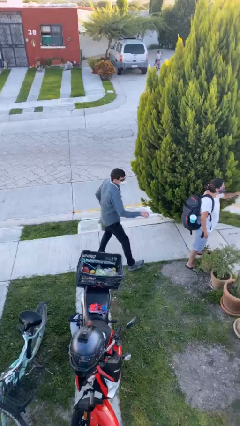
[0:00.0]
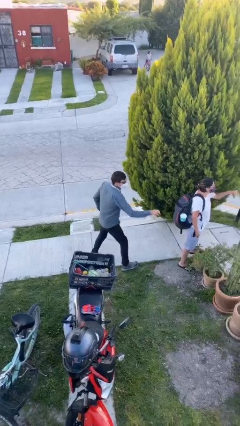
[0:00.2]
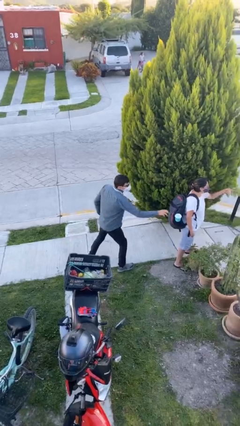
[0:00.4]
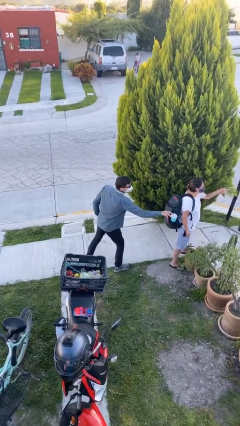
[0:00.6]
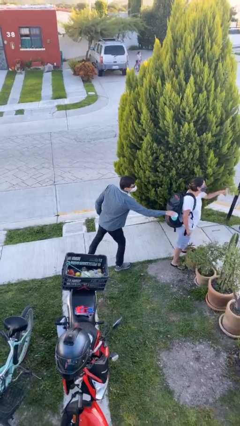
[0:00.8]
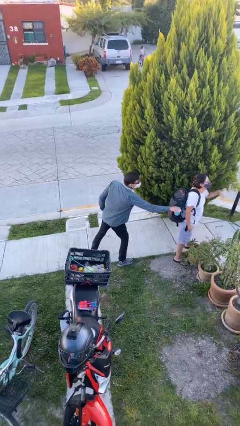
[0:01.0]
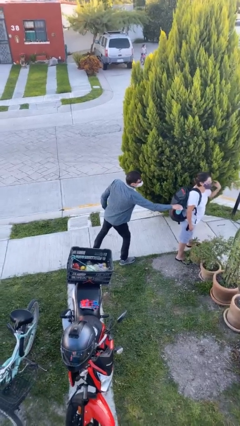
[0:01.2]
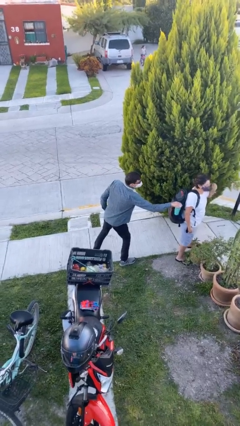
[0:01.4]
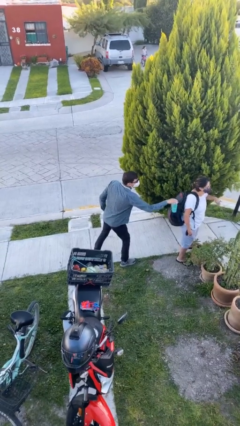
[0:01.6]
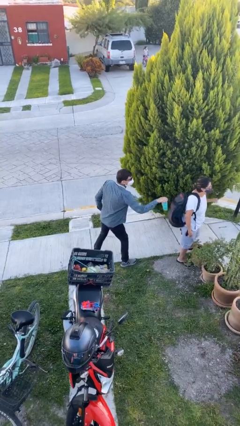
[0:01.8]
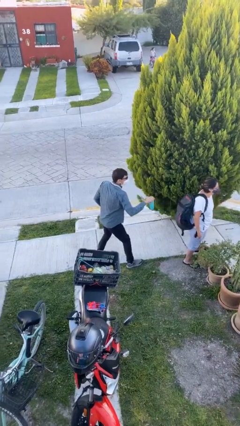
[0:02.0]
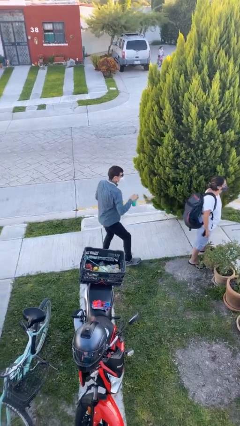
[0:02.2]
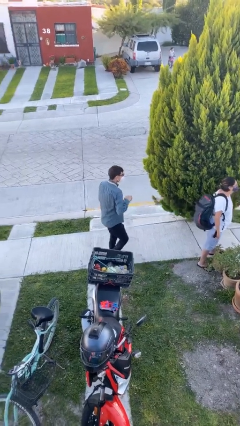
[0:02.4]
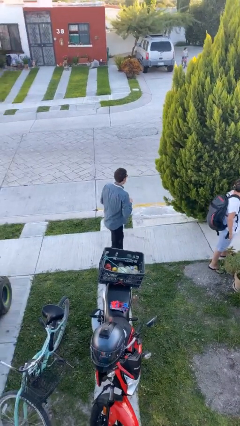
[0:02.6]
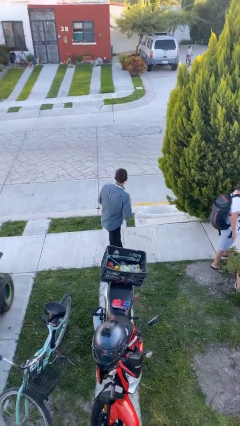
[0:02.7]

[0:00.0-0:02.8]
person steals object from person

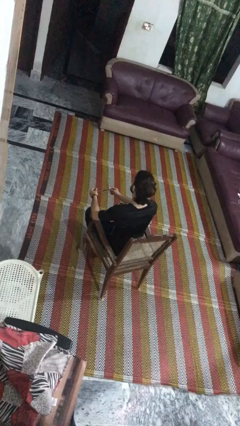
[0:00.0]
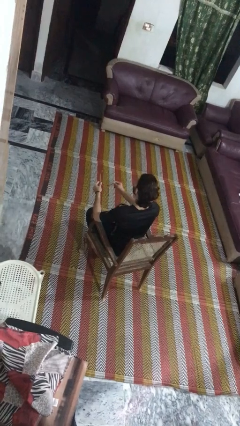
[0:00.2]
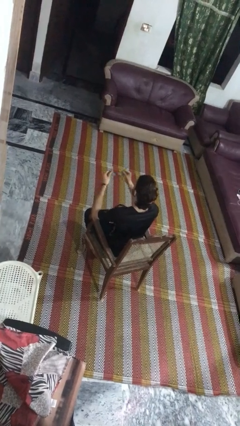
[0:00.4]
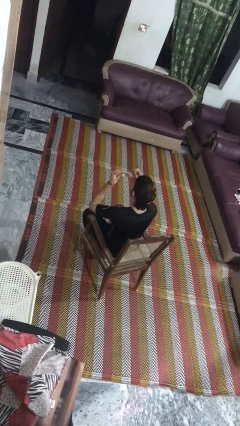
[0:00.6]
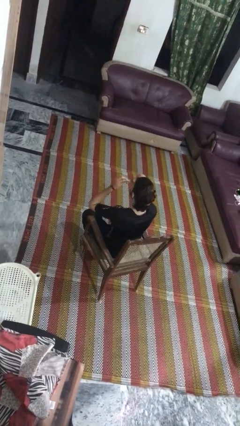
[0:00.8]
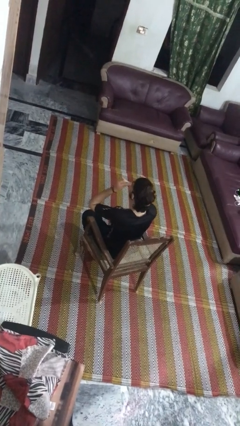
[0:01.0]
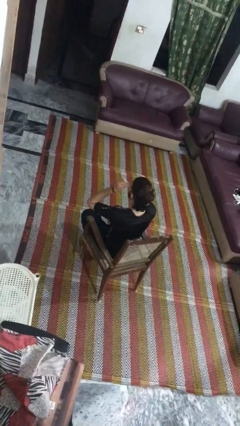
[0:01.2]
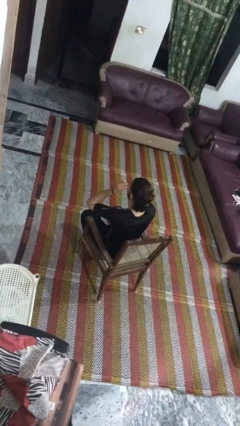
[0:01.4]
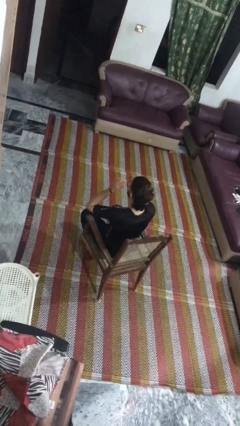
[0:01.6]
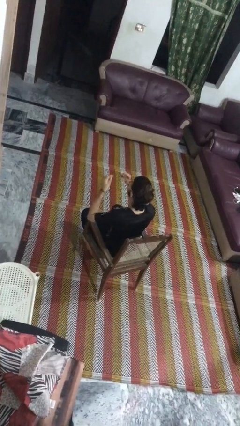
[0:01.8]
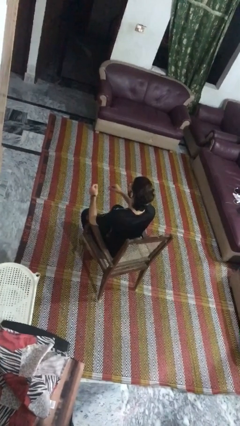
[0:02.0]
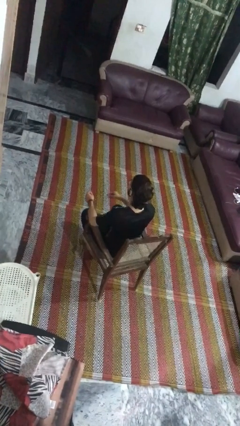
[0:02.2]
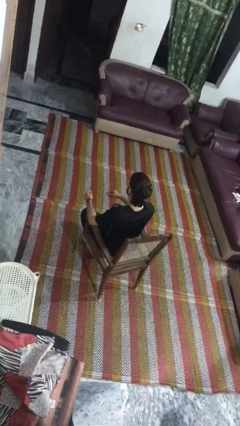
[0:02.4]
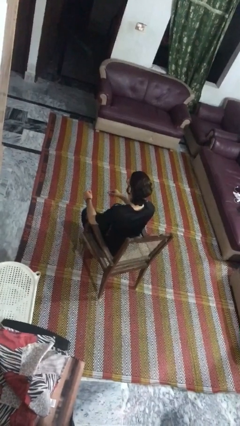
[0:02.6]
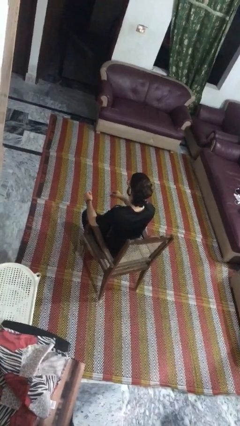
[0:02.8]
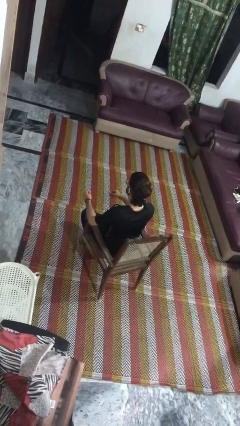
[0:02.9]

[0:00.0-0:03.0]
person puts on glasses

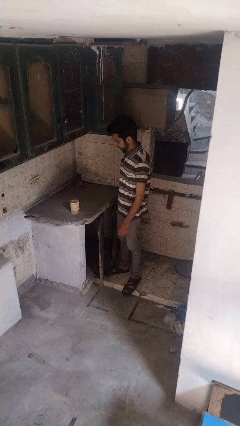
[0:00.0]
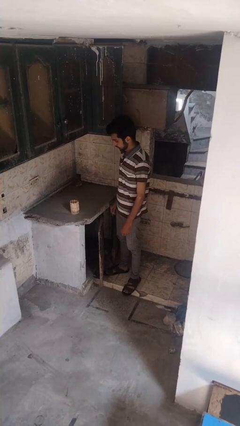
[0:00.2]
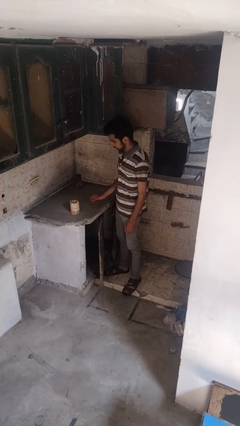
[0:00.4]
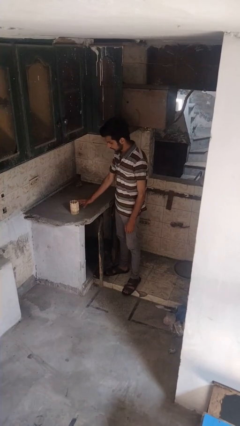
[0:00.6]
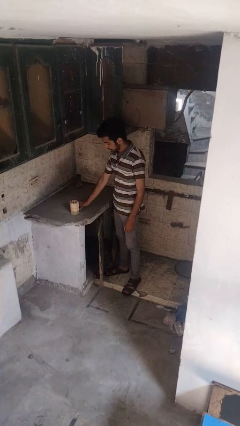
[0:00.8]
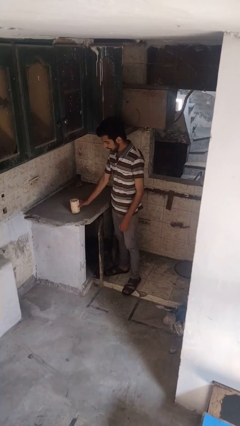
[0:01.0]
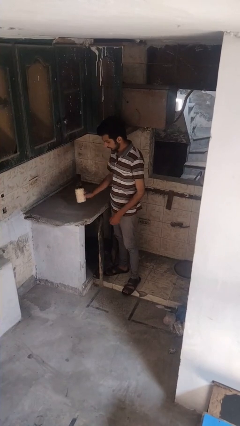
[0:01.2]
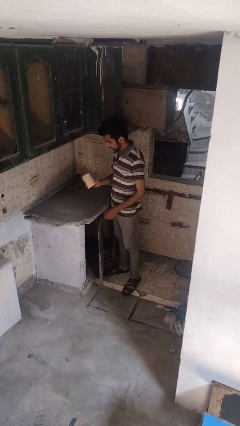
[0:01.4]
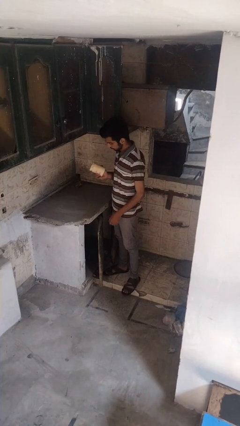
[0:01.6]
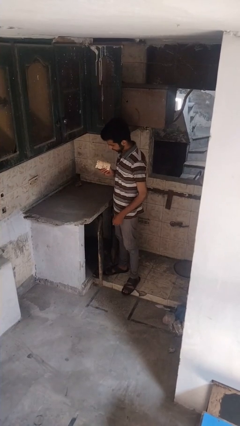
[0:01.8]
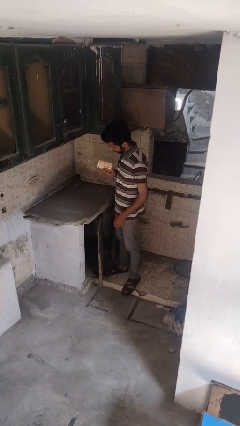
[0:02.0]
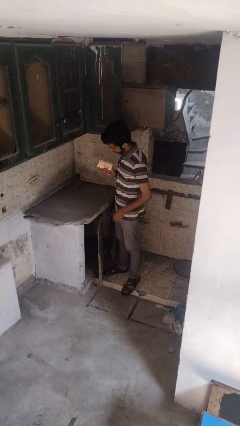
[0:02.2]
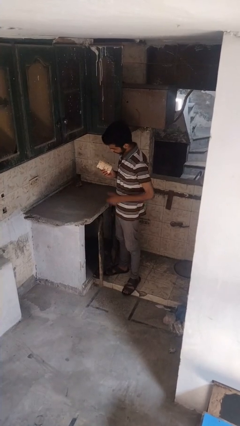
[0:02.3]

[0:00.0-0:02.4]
person picks up object from countertop

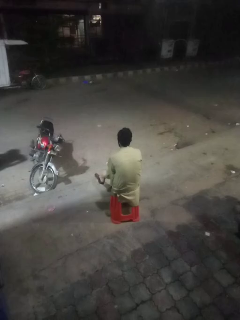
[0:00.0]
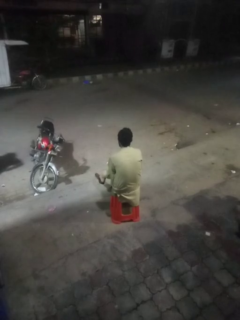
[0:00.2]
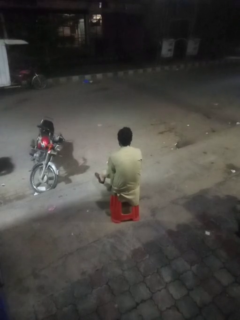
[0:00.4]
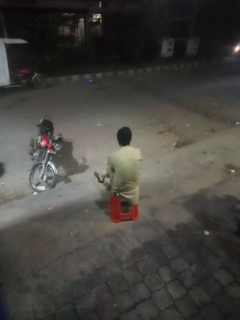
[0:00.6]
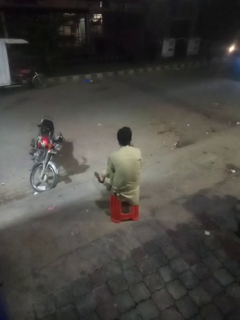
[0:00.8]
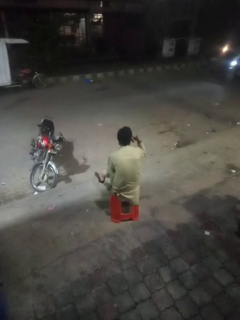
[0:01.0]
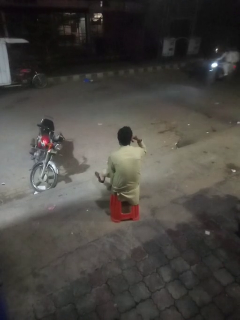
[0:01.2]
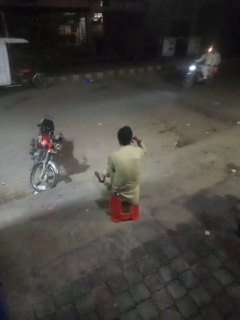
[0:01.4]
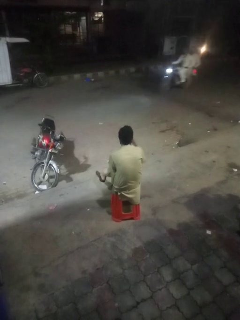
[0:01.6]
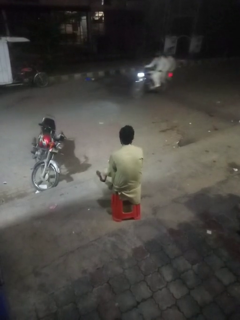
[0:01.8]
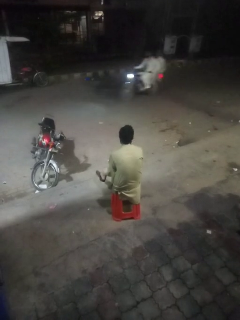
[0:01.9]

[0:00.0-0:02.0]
person gestures call me

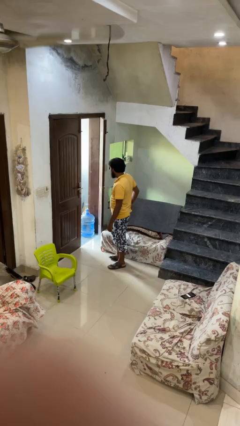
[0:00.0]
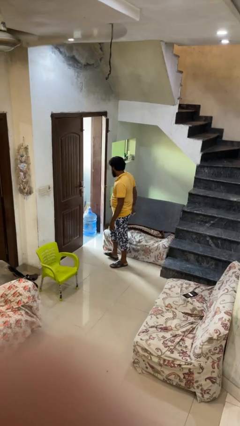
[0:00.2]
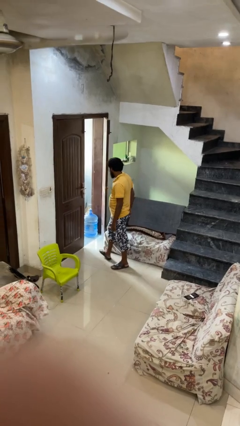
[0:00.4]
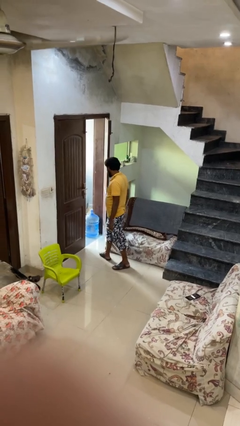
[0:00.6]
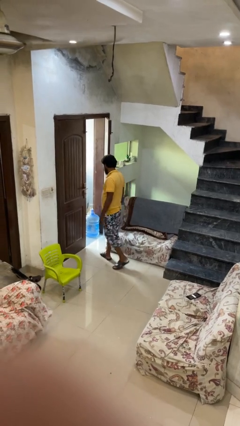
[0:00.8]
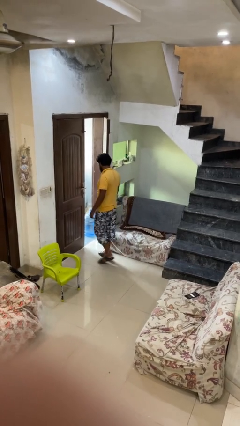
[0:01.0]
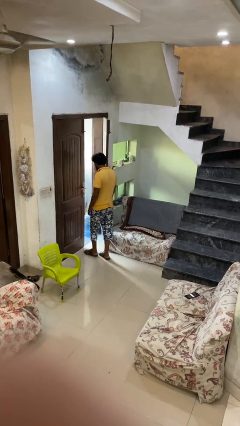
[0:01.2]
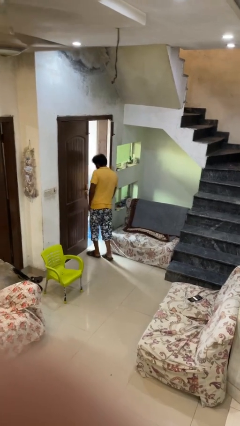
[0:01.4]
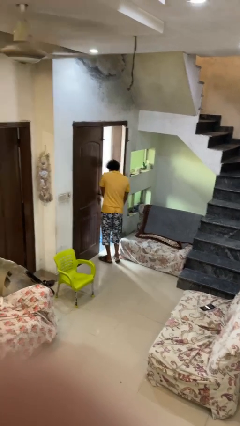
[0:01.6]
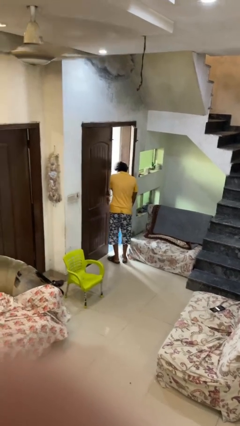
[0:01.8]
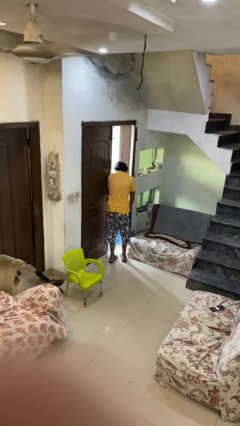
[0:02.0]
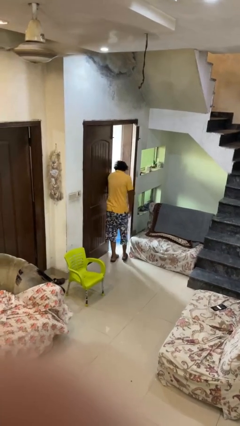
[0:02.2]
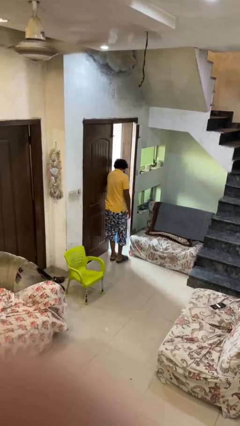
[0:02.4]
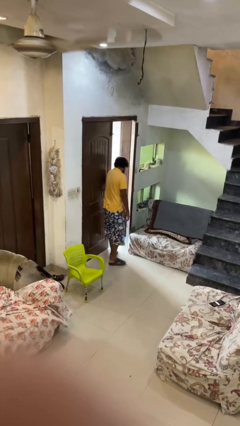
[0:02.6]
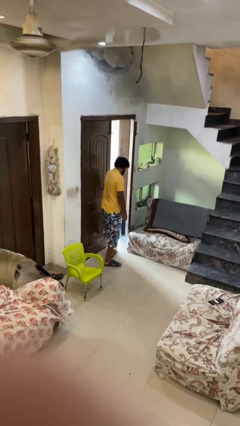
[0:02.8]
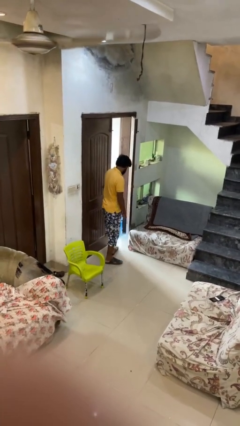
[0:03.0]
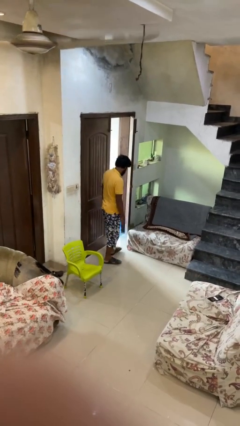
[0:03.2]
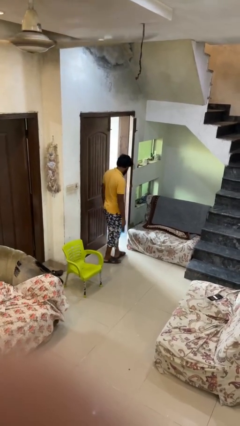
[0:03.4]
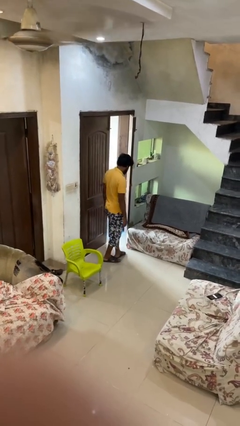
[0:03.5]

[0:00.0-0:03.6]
person bumps into wall

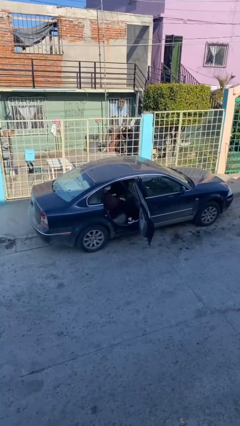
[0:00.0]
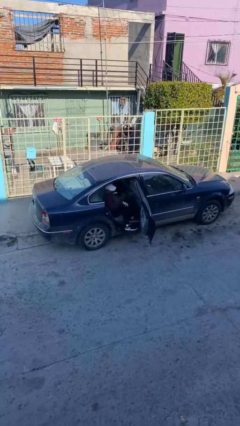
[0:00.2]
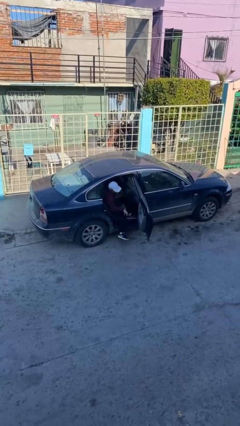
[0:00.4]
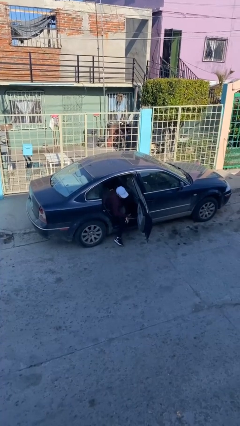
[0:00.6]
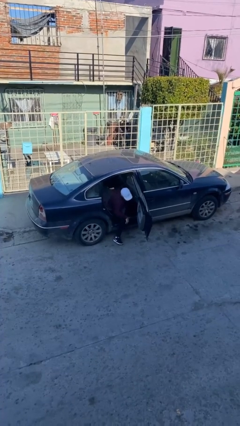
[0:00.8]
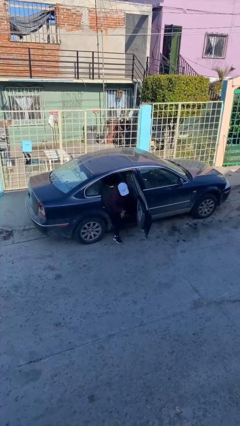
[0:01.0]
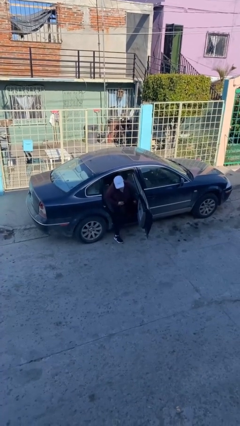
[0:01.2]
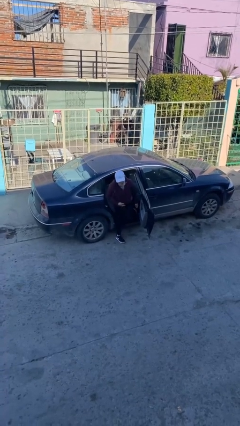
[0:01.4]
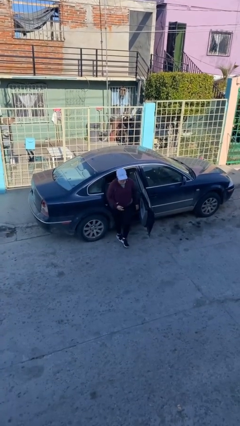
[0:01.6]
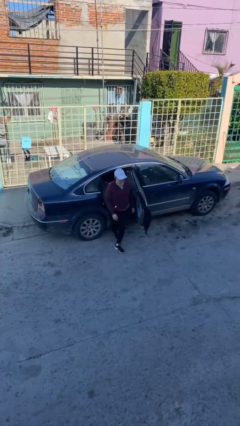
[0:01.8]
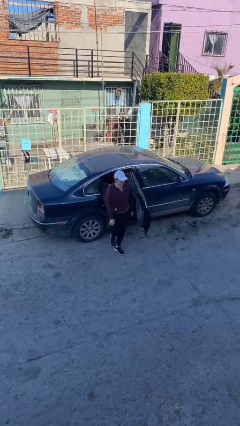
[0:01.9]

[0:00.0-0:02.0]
person exits car

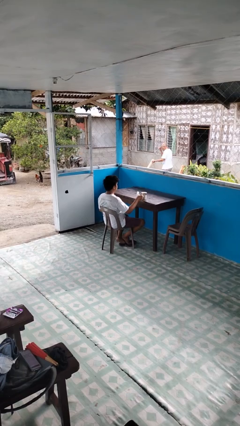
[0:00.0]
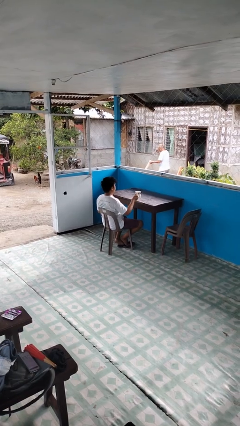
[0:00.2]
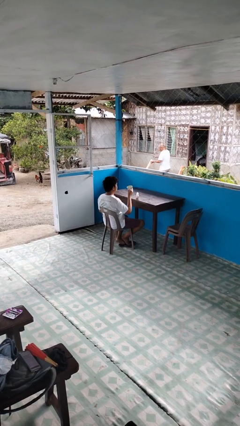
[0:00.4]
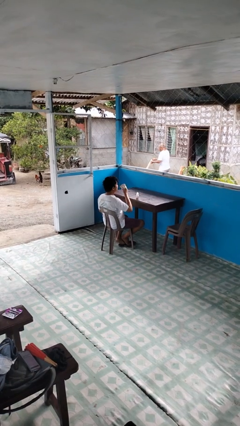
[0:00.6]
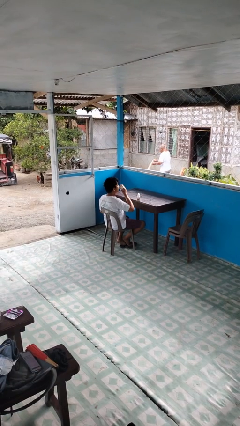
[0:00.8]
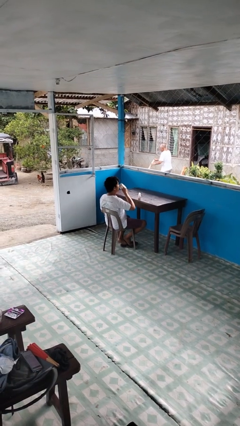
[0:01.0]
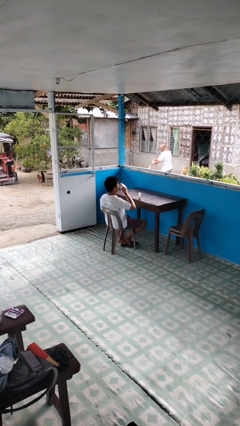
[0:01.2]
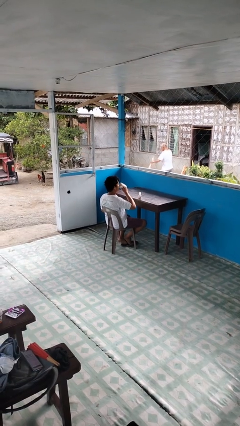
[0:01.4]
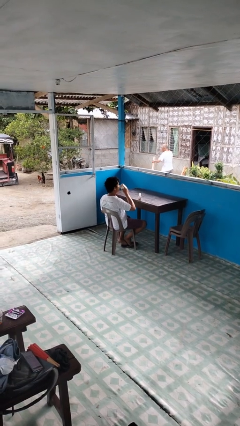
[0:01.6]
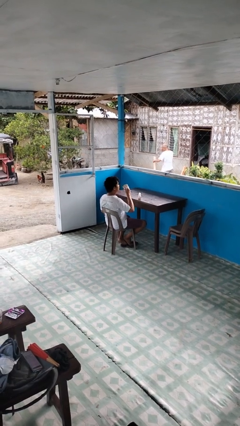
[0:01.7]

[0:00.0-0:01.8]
person drinks from cup
